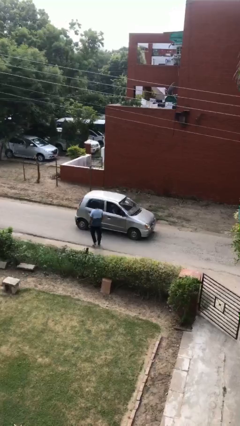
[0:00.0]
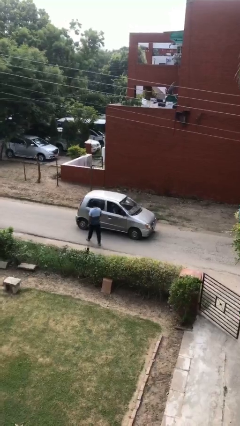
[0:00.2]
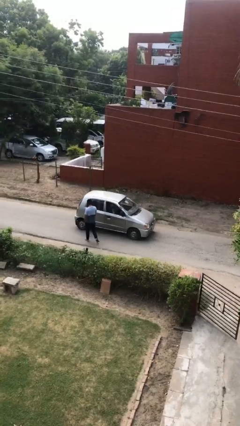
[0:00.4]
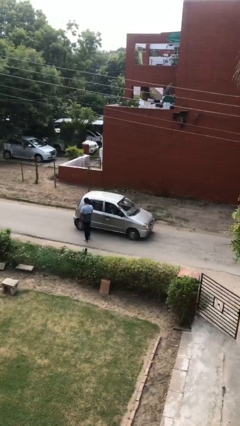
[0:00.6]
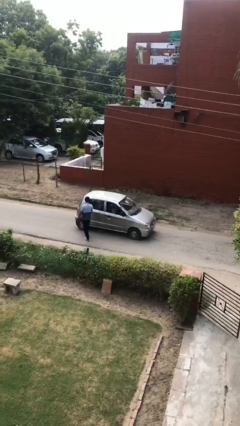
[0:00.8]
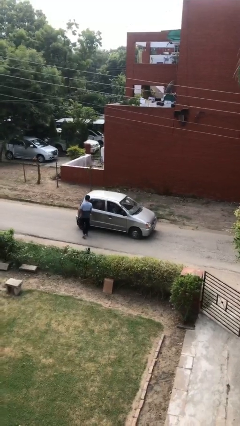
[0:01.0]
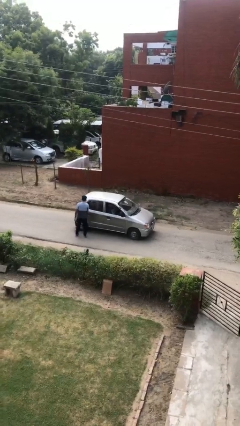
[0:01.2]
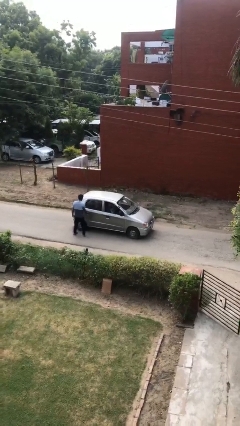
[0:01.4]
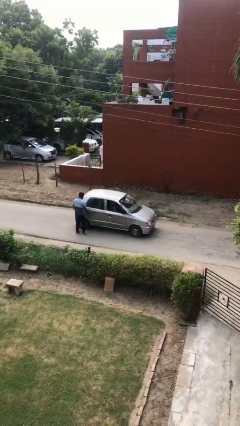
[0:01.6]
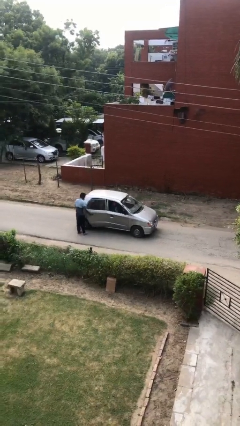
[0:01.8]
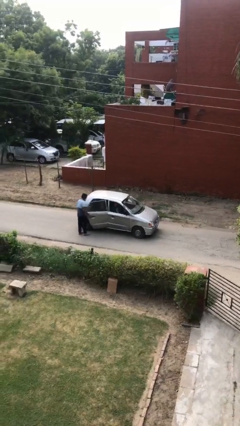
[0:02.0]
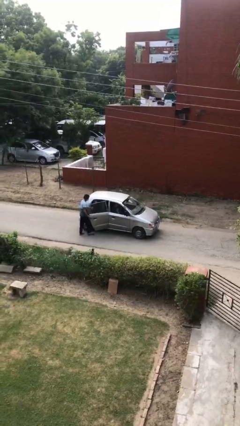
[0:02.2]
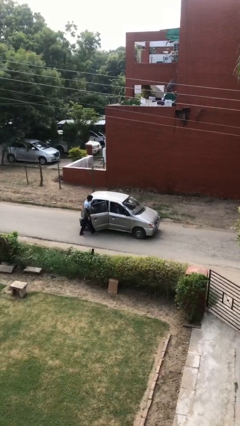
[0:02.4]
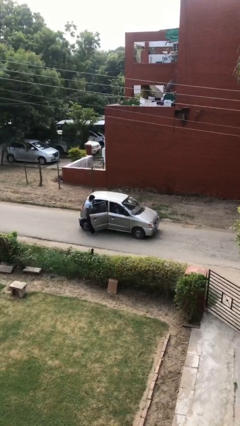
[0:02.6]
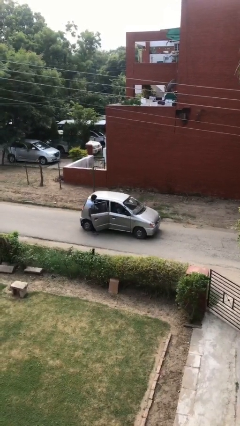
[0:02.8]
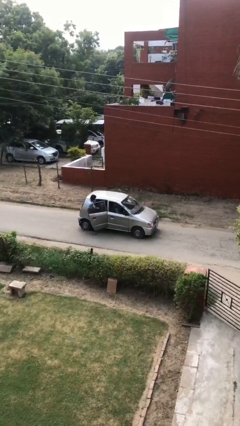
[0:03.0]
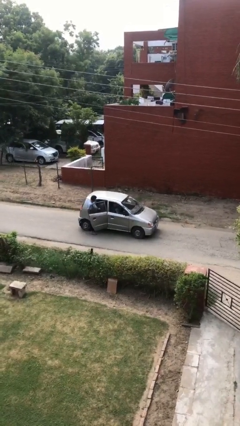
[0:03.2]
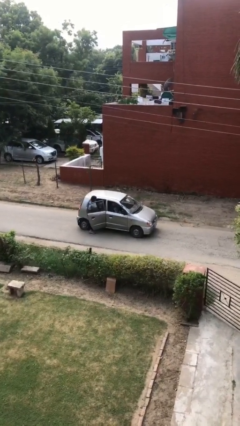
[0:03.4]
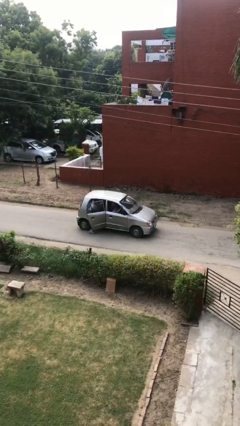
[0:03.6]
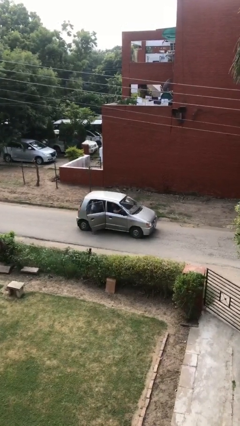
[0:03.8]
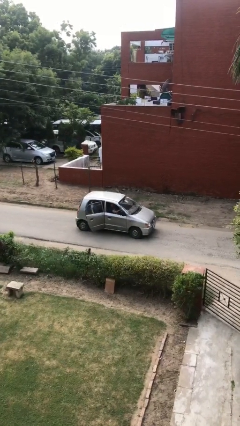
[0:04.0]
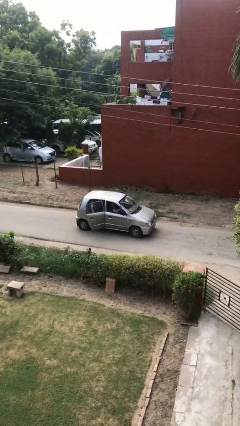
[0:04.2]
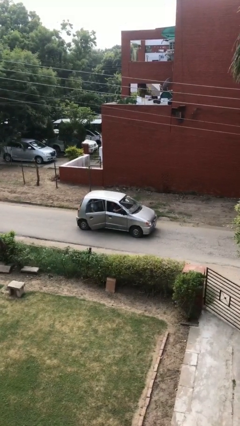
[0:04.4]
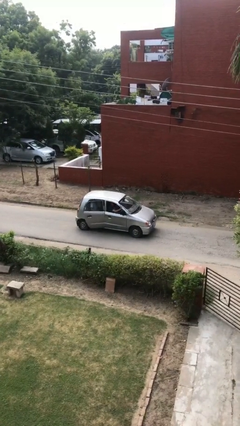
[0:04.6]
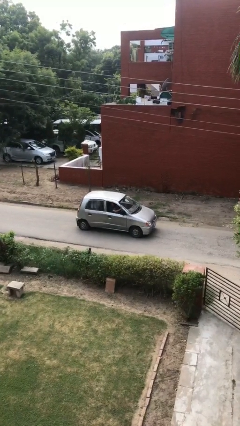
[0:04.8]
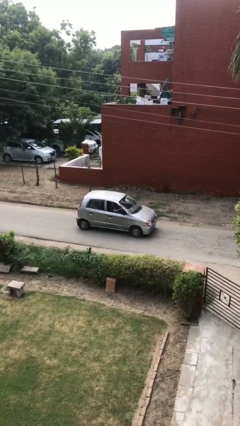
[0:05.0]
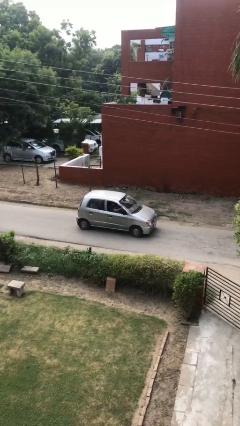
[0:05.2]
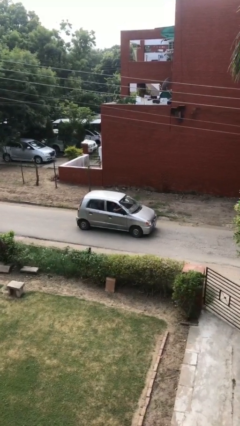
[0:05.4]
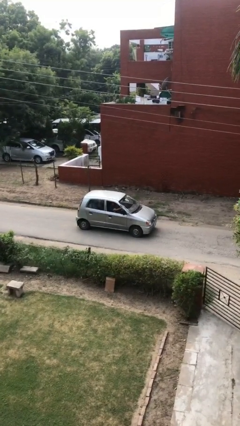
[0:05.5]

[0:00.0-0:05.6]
car picks up person

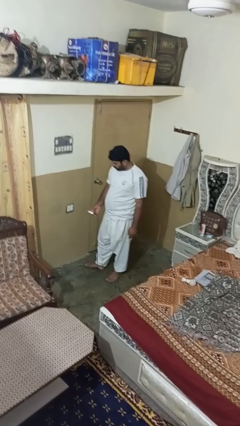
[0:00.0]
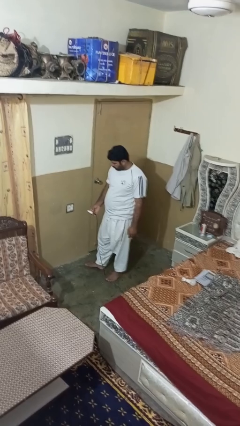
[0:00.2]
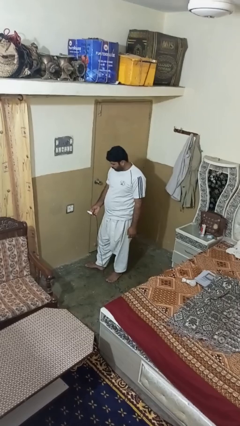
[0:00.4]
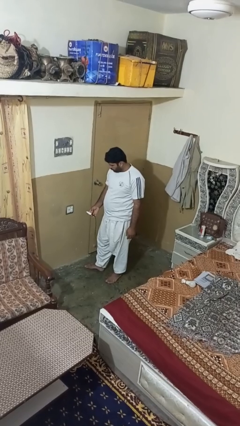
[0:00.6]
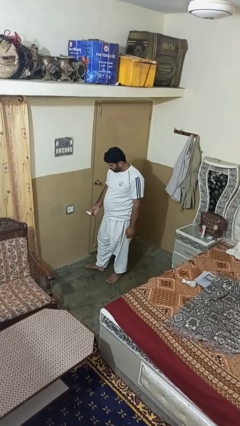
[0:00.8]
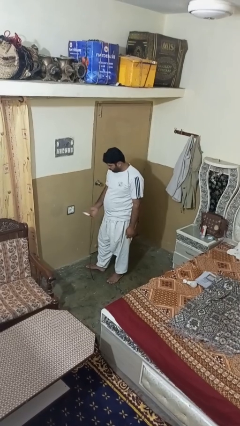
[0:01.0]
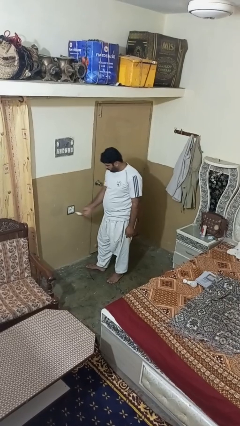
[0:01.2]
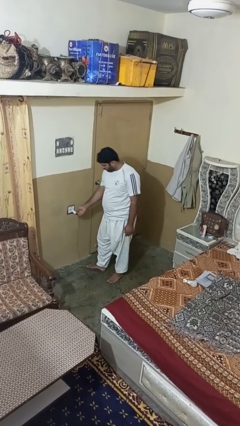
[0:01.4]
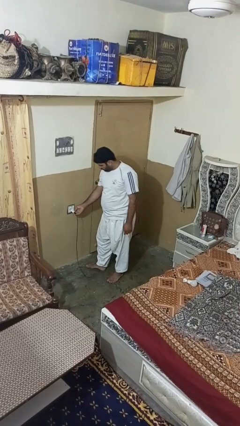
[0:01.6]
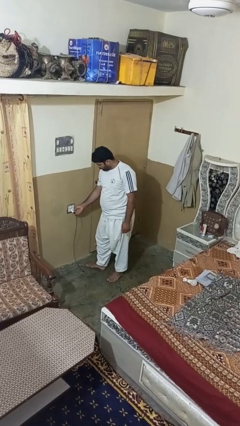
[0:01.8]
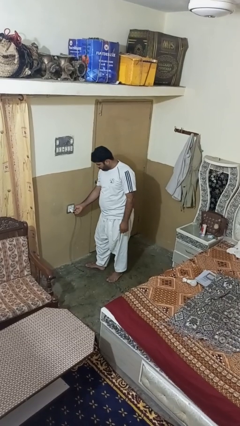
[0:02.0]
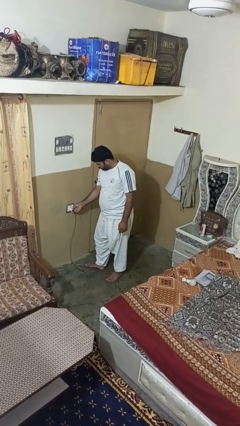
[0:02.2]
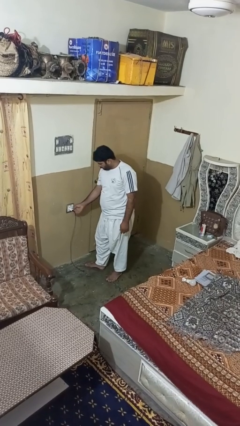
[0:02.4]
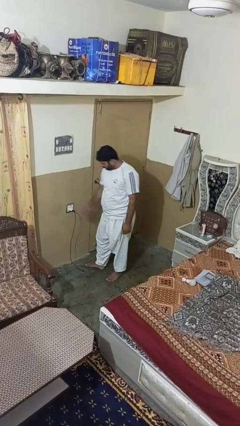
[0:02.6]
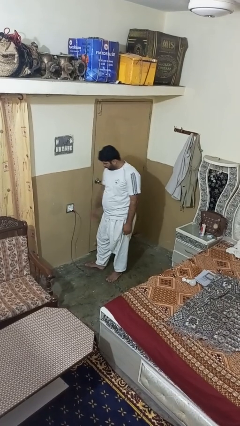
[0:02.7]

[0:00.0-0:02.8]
person plugs into electrical socket

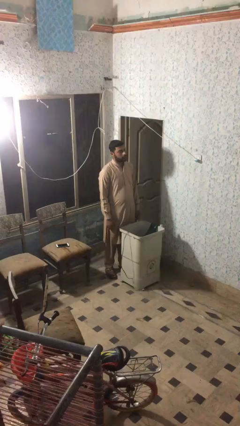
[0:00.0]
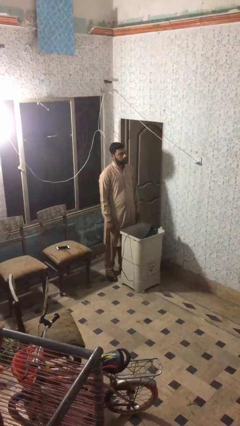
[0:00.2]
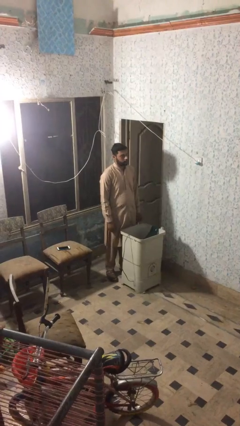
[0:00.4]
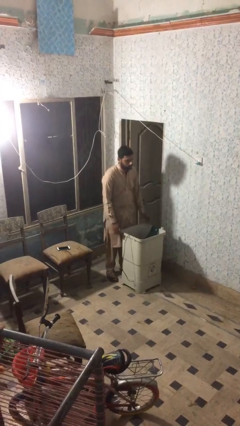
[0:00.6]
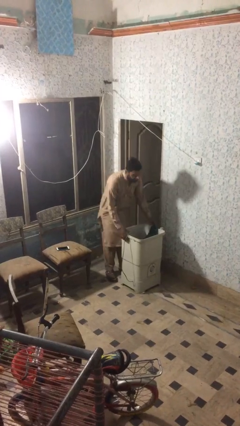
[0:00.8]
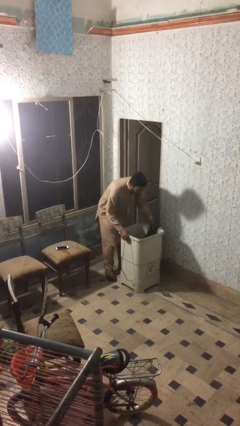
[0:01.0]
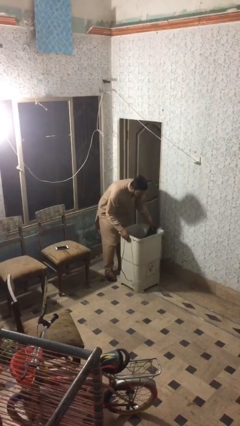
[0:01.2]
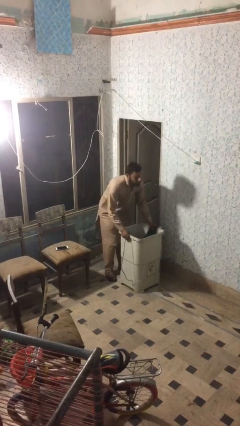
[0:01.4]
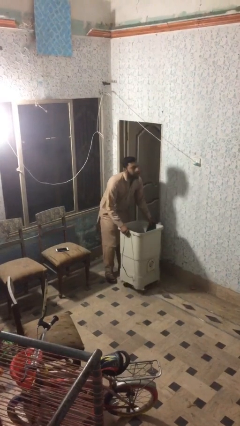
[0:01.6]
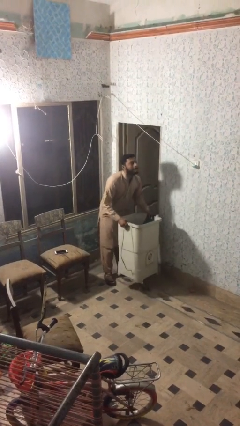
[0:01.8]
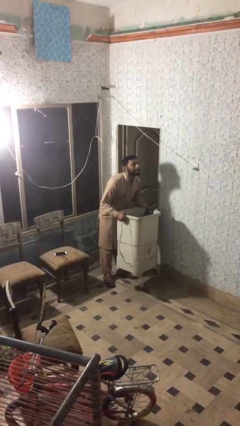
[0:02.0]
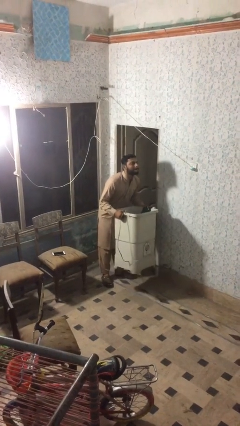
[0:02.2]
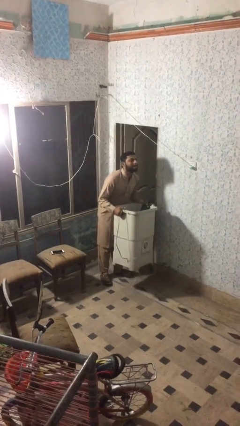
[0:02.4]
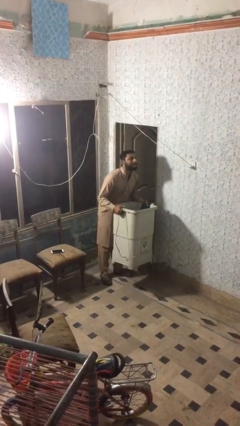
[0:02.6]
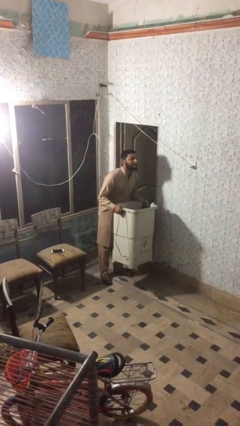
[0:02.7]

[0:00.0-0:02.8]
person picks up object from floor

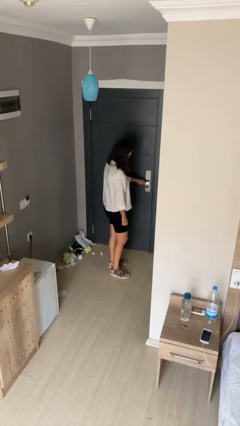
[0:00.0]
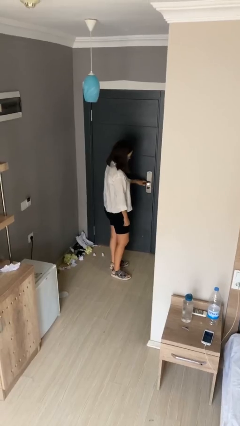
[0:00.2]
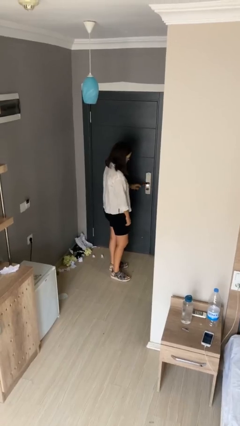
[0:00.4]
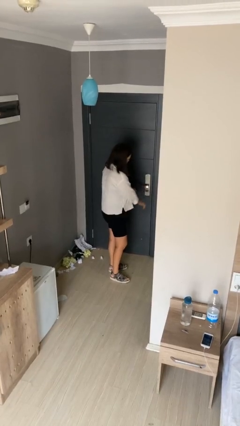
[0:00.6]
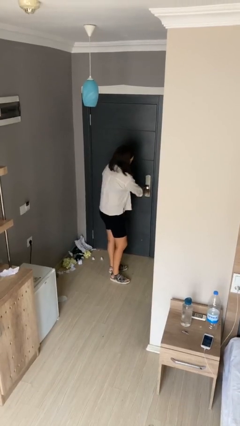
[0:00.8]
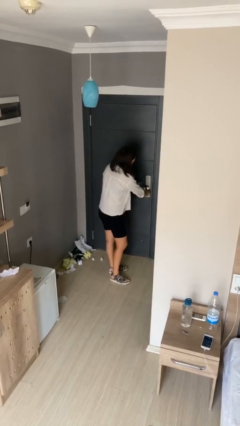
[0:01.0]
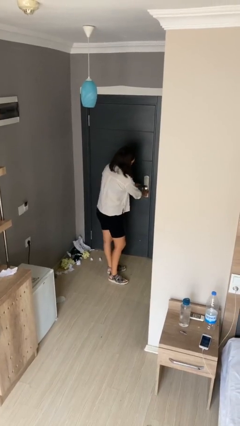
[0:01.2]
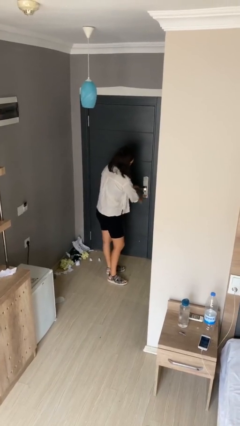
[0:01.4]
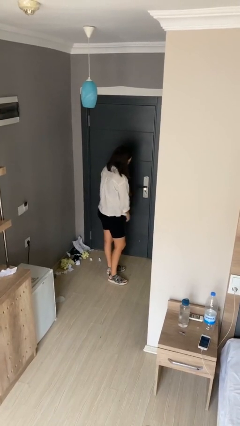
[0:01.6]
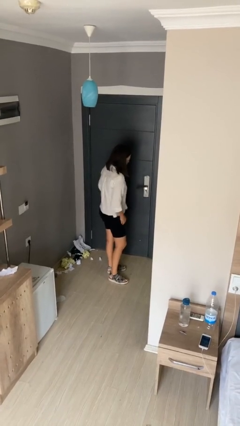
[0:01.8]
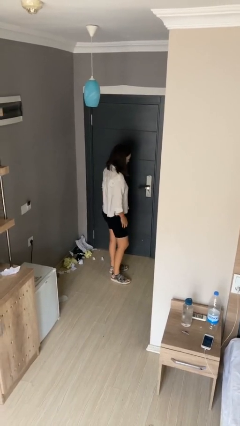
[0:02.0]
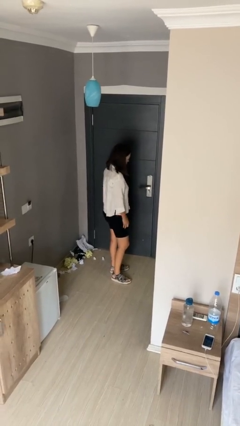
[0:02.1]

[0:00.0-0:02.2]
person locks door with keys

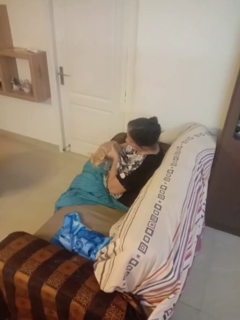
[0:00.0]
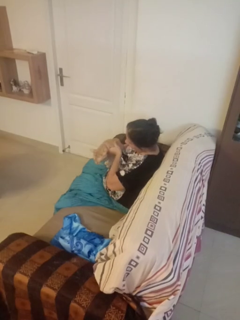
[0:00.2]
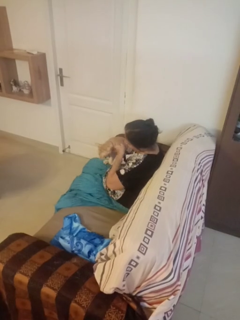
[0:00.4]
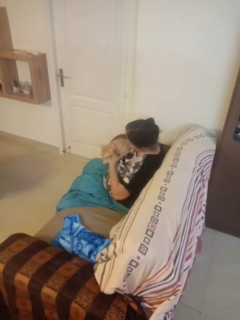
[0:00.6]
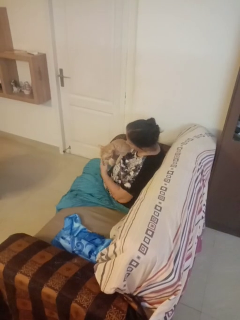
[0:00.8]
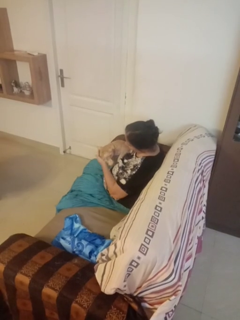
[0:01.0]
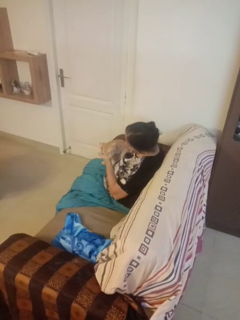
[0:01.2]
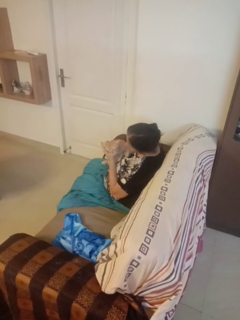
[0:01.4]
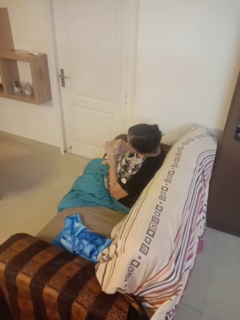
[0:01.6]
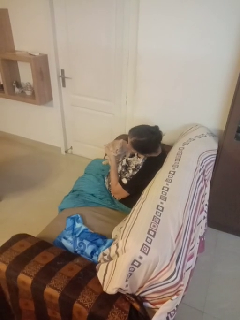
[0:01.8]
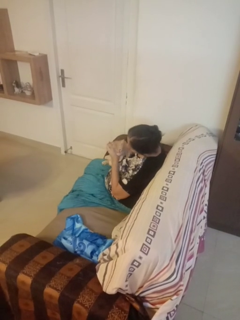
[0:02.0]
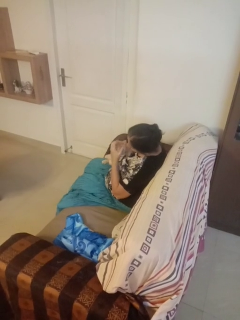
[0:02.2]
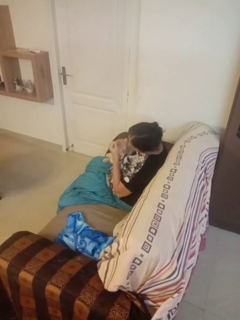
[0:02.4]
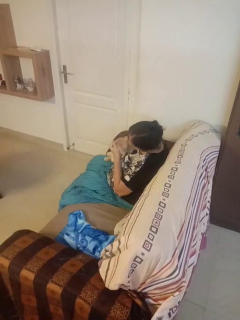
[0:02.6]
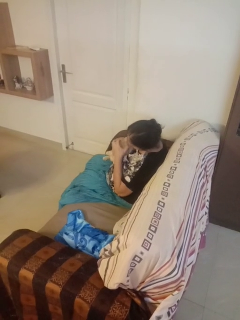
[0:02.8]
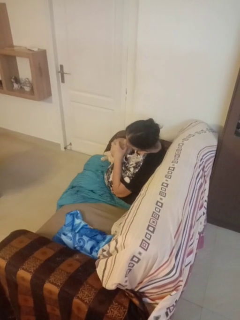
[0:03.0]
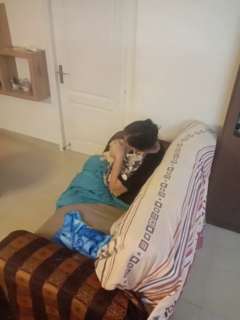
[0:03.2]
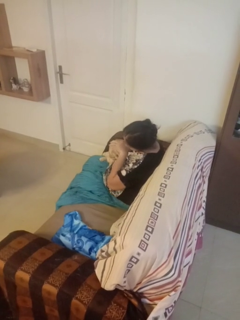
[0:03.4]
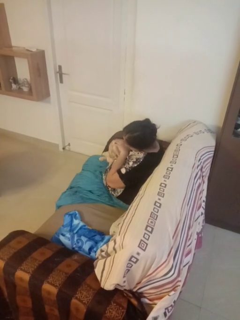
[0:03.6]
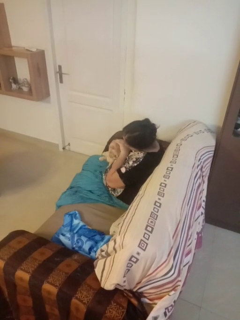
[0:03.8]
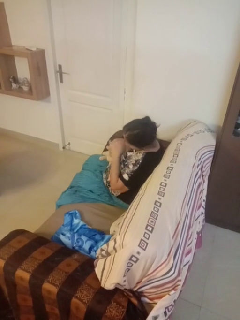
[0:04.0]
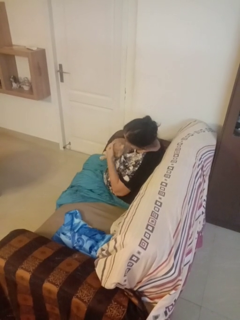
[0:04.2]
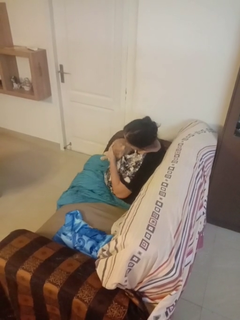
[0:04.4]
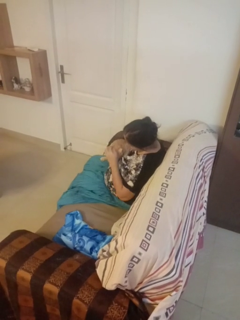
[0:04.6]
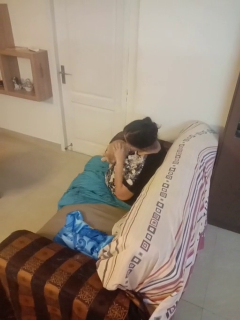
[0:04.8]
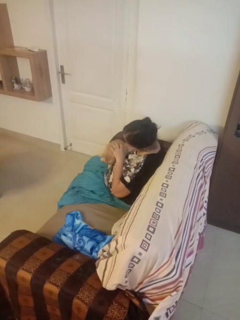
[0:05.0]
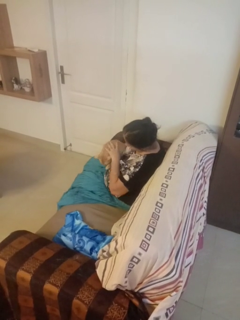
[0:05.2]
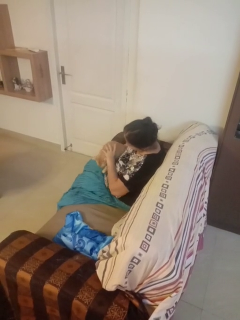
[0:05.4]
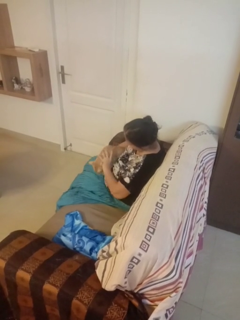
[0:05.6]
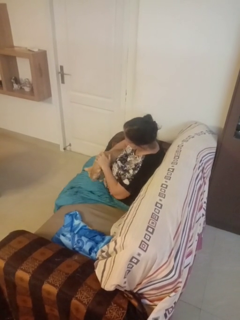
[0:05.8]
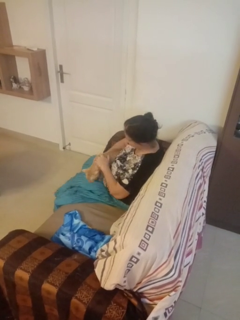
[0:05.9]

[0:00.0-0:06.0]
person hugs cat
